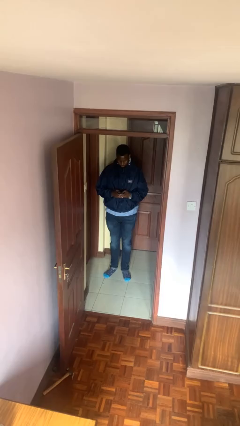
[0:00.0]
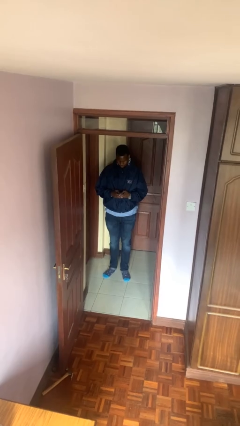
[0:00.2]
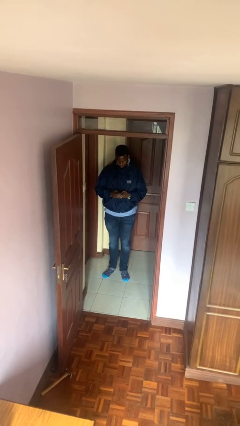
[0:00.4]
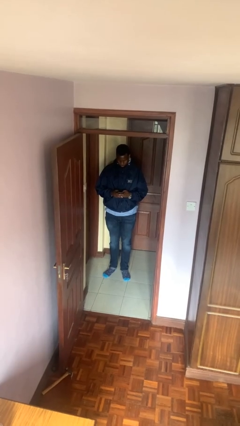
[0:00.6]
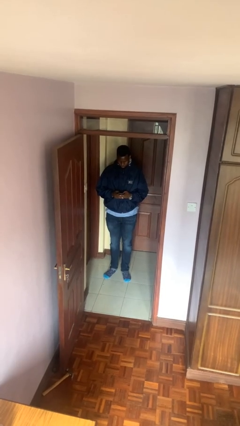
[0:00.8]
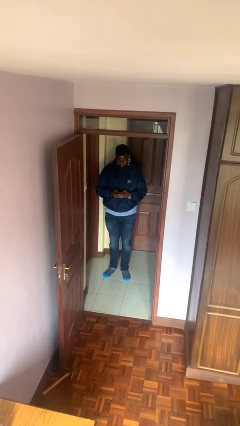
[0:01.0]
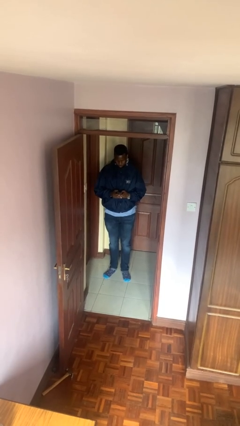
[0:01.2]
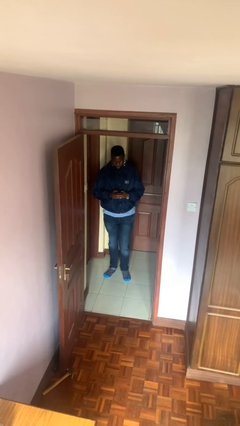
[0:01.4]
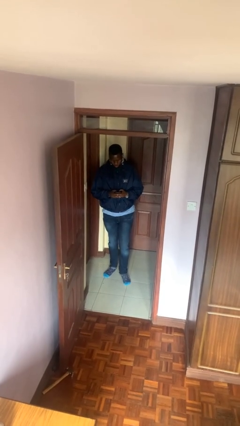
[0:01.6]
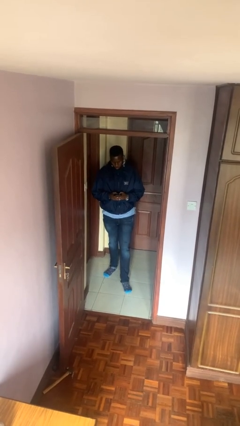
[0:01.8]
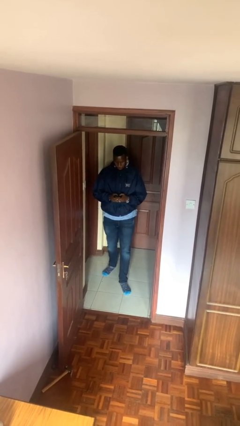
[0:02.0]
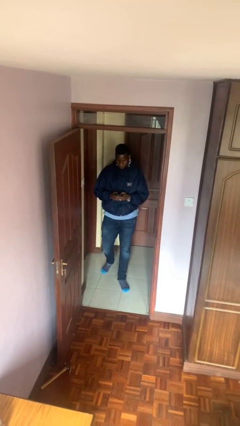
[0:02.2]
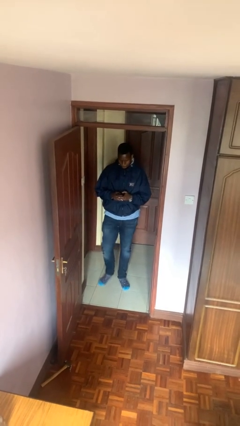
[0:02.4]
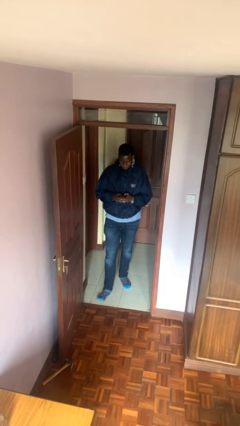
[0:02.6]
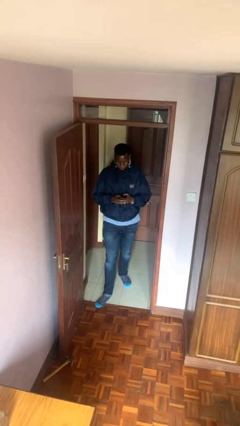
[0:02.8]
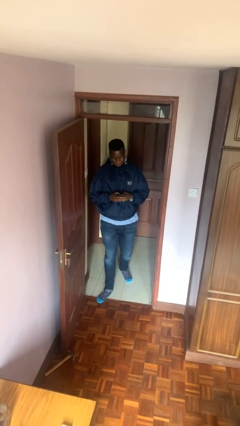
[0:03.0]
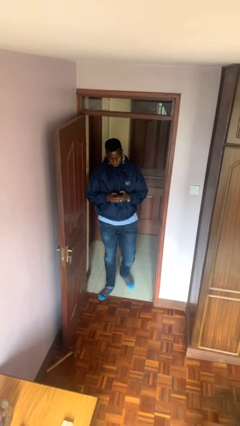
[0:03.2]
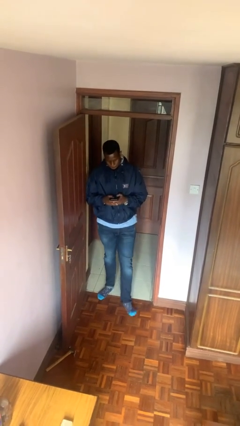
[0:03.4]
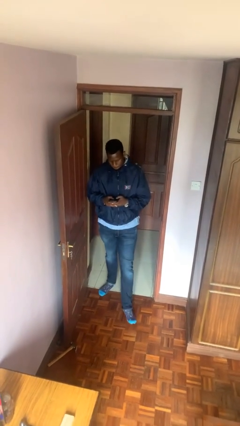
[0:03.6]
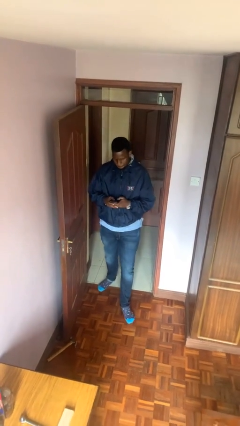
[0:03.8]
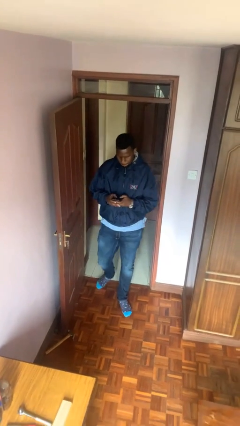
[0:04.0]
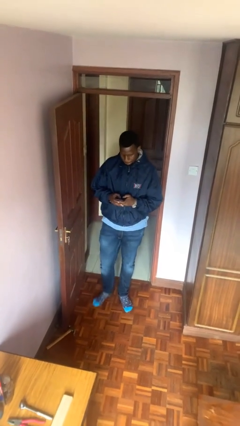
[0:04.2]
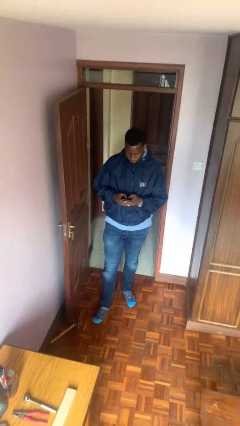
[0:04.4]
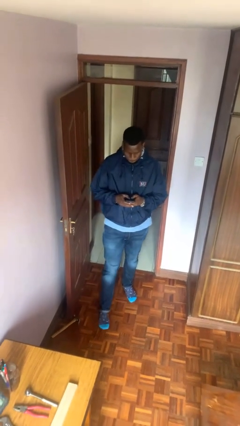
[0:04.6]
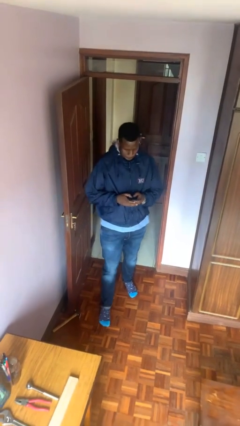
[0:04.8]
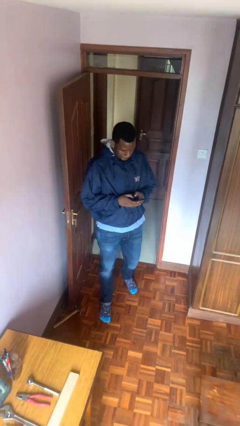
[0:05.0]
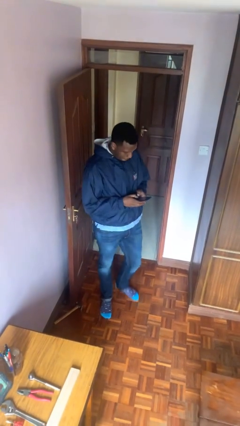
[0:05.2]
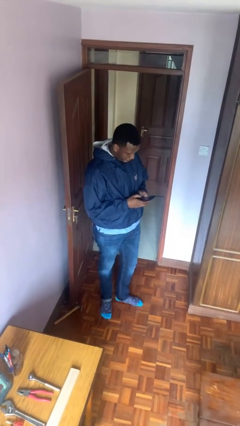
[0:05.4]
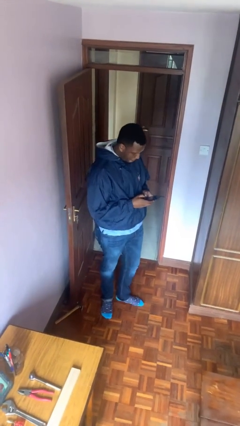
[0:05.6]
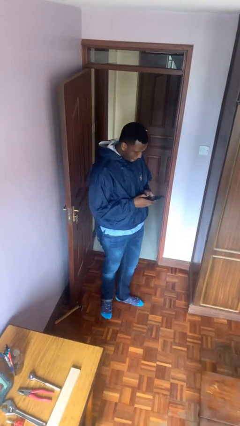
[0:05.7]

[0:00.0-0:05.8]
person enters scene through structure

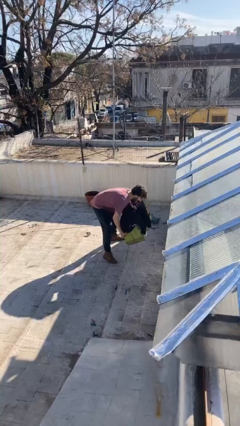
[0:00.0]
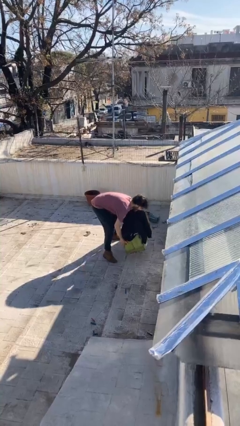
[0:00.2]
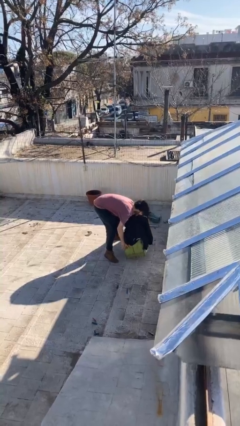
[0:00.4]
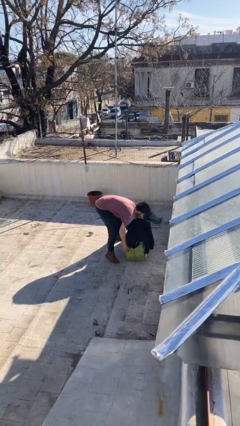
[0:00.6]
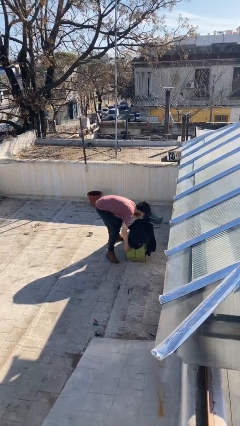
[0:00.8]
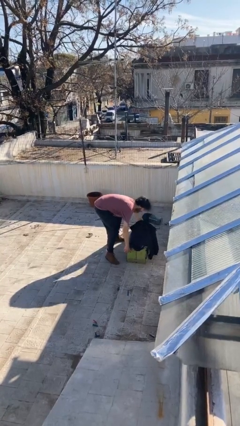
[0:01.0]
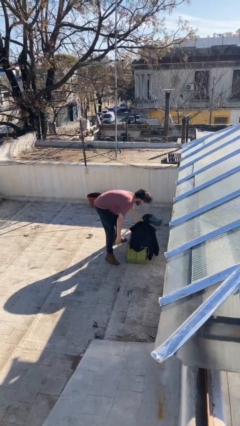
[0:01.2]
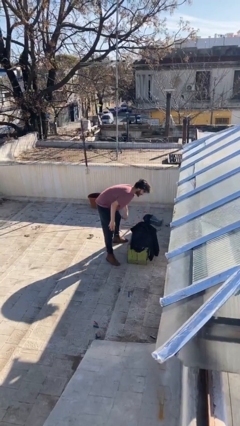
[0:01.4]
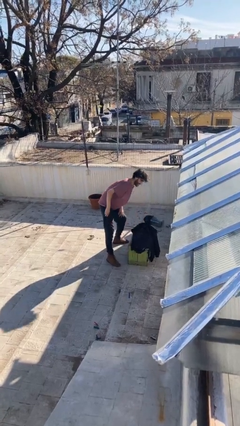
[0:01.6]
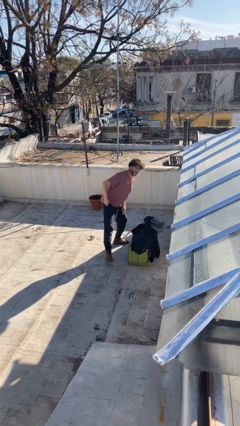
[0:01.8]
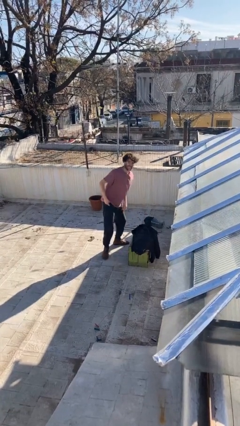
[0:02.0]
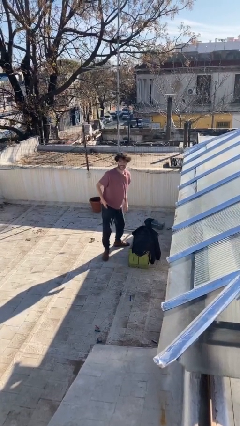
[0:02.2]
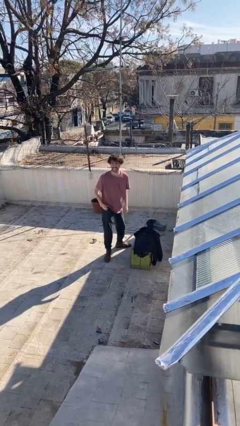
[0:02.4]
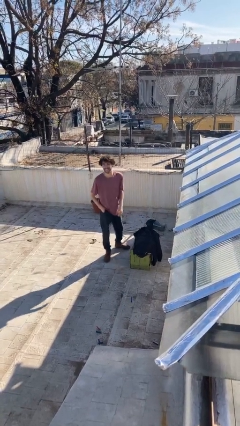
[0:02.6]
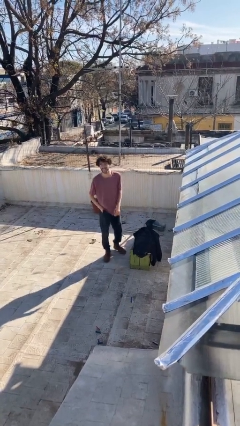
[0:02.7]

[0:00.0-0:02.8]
person puts down object on floor

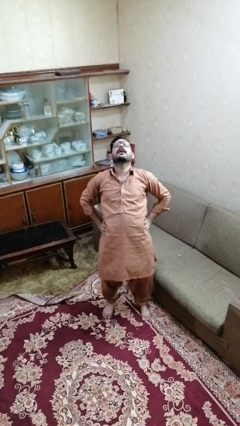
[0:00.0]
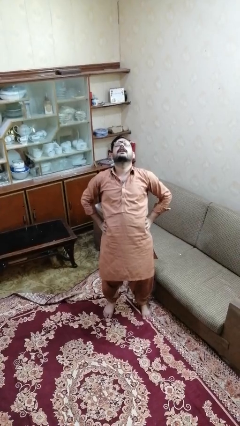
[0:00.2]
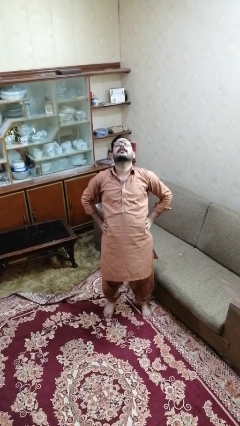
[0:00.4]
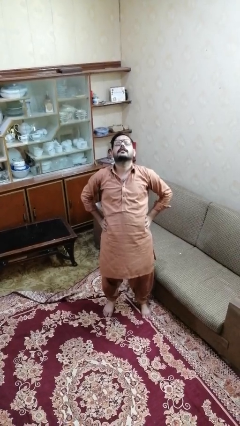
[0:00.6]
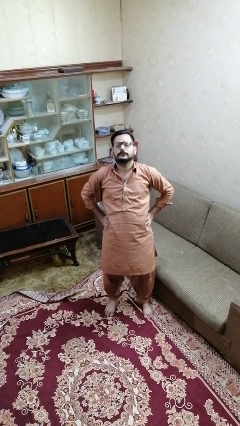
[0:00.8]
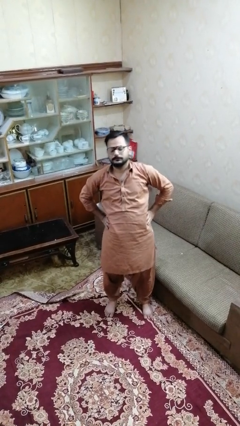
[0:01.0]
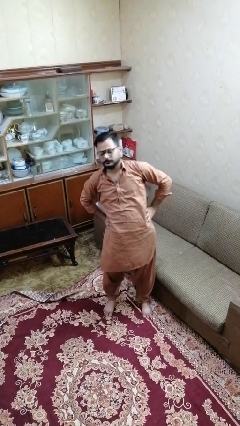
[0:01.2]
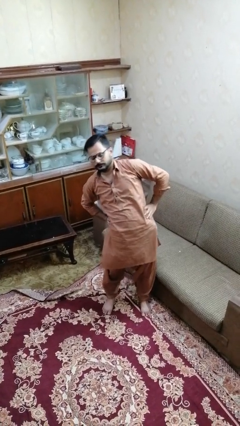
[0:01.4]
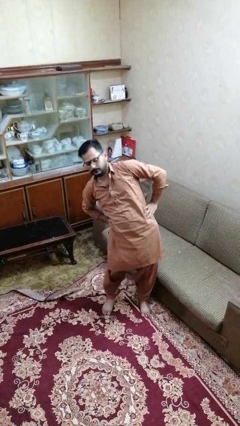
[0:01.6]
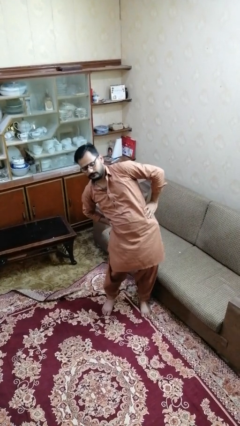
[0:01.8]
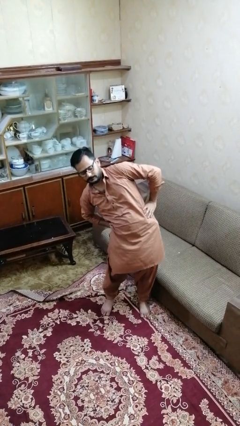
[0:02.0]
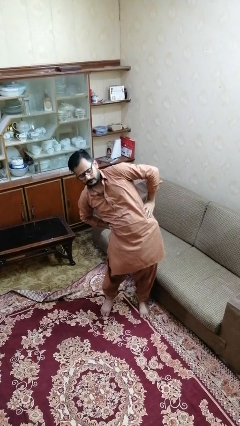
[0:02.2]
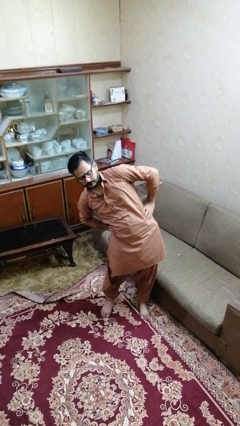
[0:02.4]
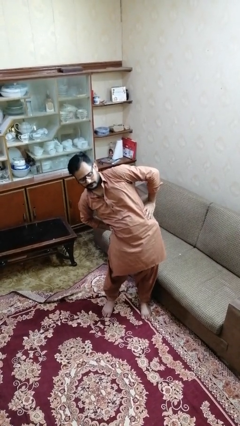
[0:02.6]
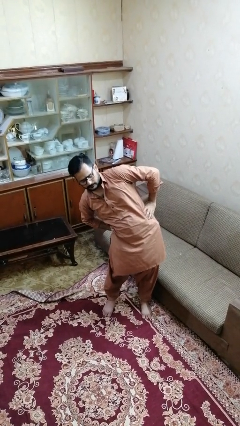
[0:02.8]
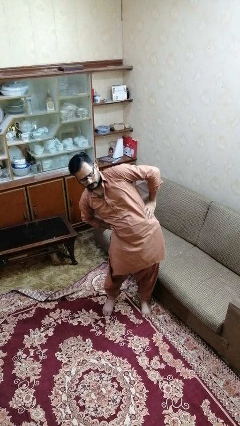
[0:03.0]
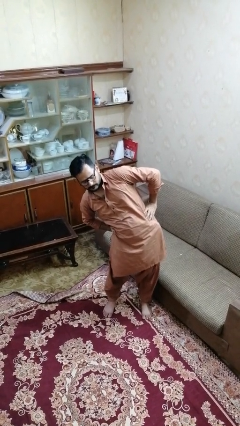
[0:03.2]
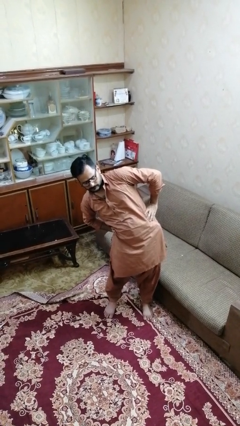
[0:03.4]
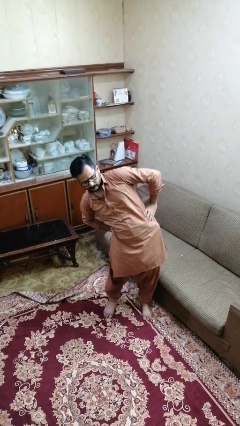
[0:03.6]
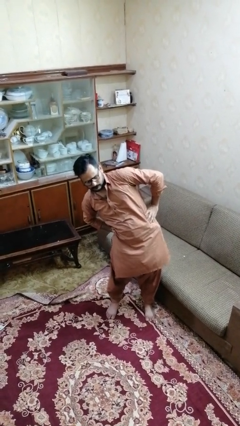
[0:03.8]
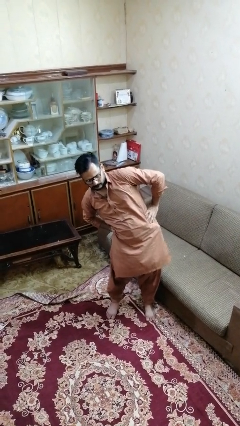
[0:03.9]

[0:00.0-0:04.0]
person stretches arms to side

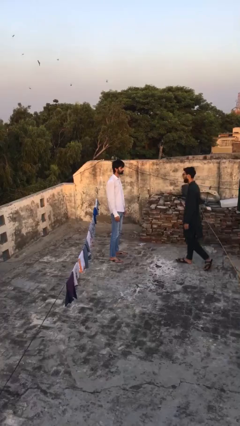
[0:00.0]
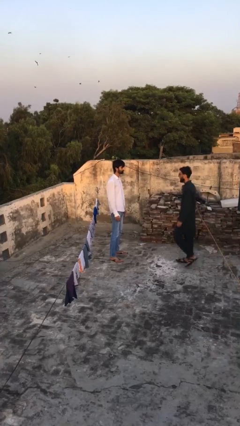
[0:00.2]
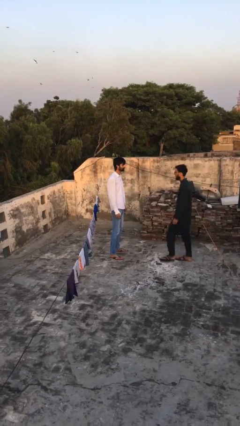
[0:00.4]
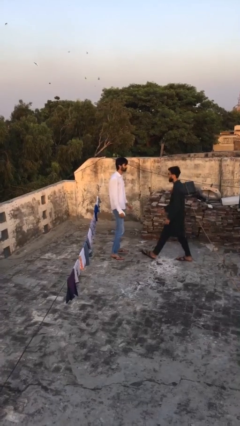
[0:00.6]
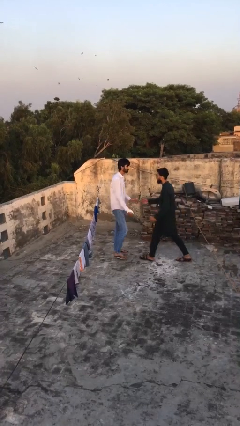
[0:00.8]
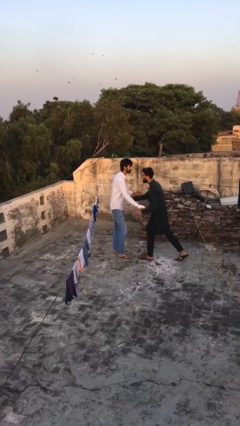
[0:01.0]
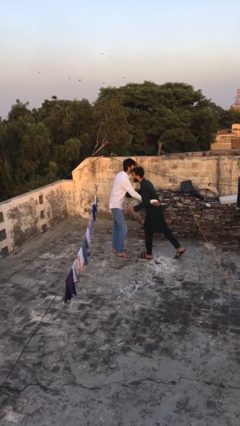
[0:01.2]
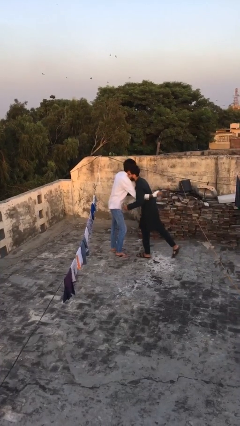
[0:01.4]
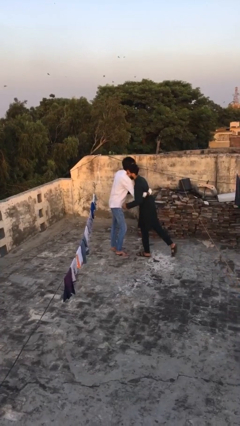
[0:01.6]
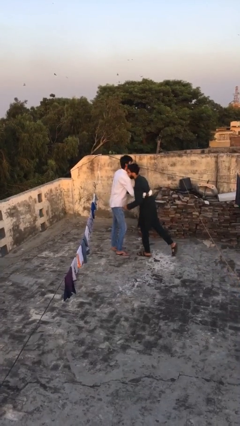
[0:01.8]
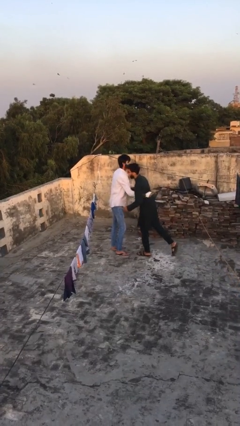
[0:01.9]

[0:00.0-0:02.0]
person embraces person

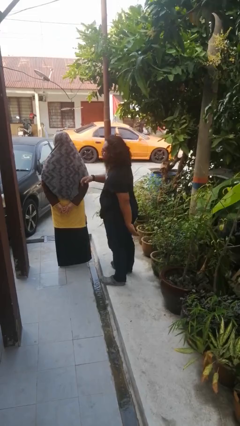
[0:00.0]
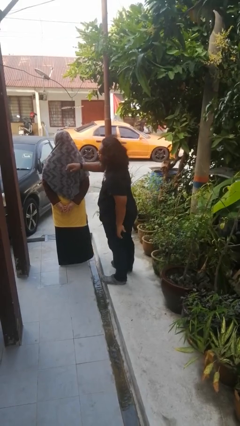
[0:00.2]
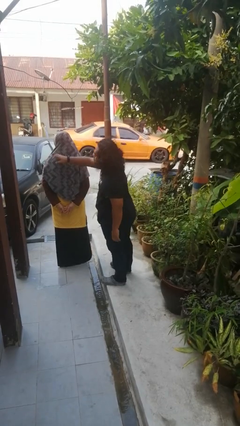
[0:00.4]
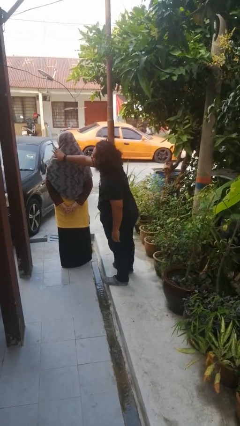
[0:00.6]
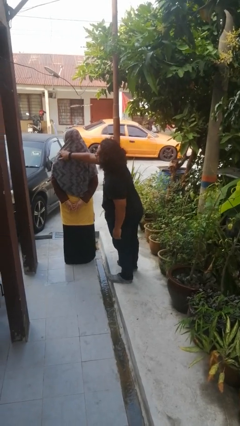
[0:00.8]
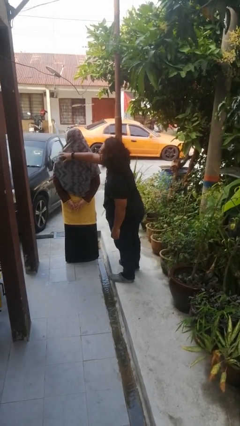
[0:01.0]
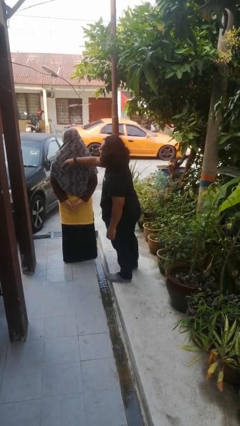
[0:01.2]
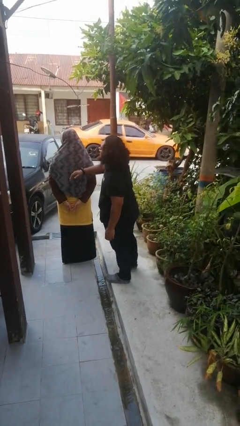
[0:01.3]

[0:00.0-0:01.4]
person touches back of person

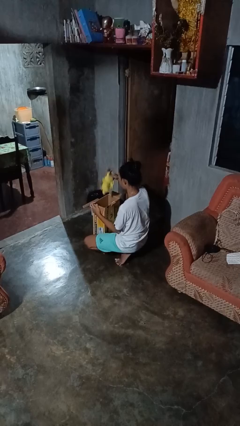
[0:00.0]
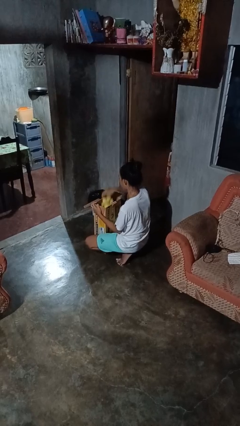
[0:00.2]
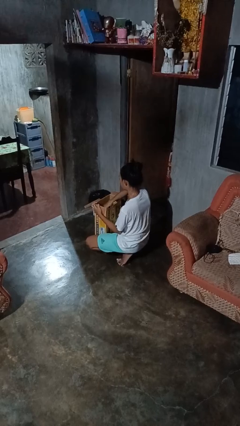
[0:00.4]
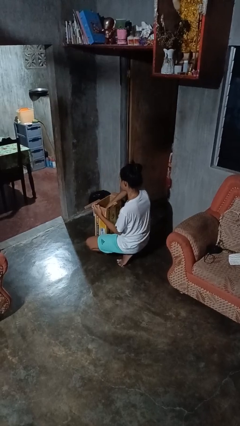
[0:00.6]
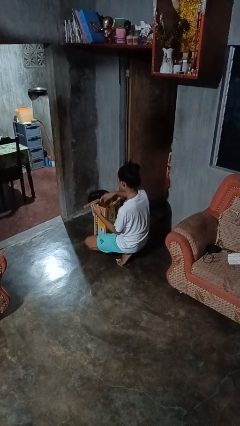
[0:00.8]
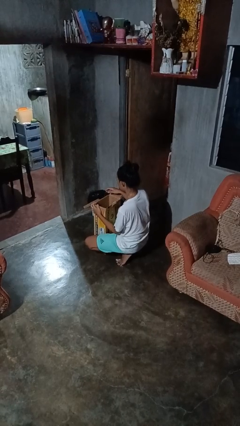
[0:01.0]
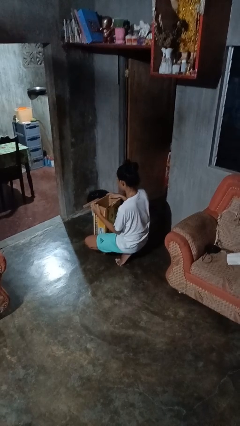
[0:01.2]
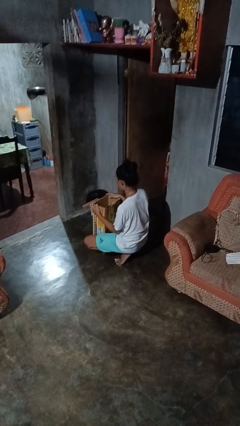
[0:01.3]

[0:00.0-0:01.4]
person puts object into box
